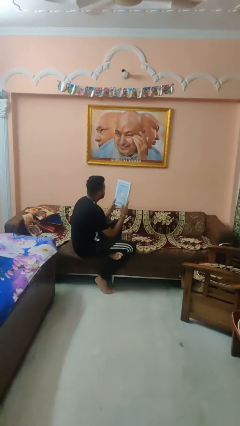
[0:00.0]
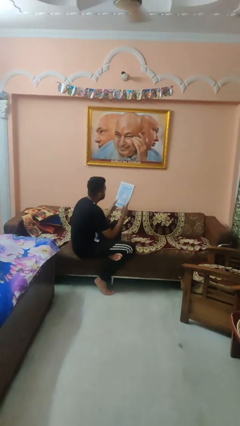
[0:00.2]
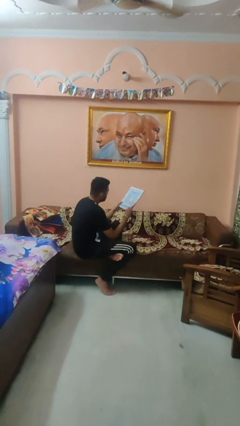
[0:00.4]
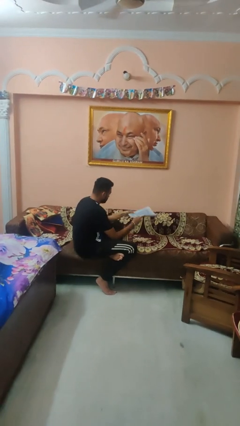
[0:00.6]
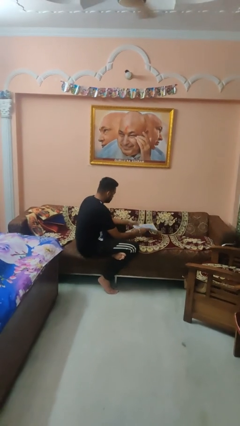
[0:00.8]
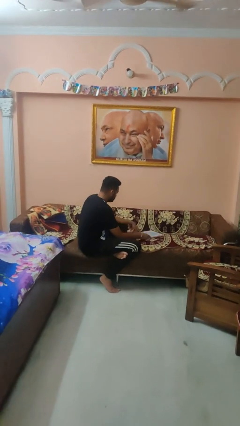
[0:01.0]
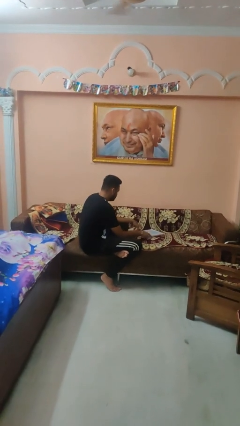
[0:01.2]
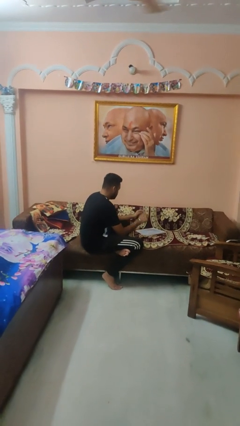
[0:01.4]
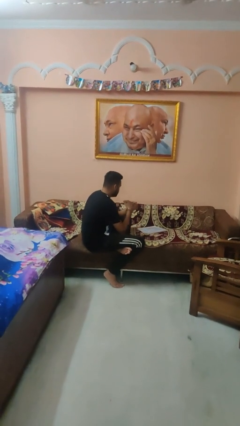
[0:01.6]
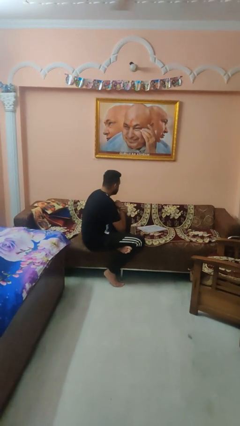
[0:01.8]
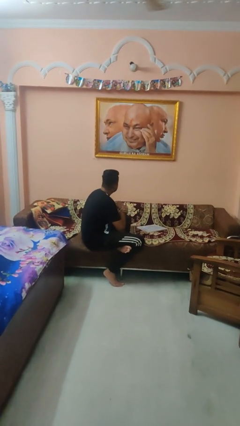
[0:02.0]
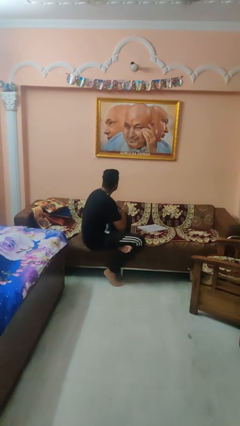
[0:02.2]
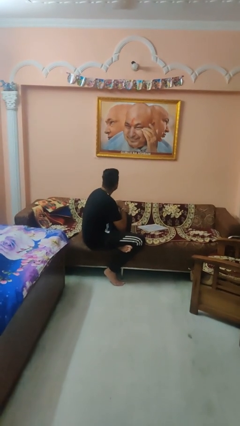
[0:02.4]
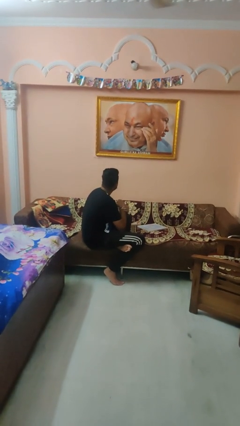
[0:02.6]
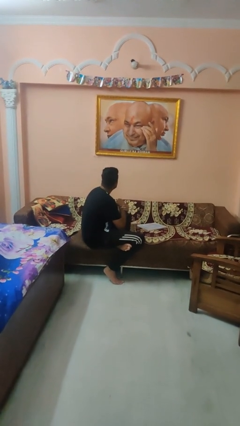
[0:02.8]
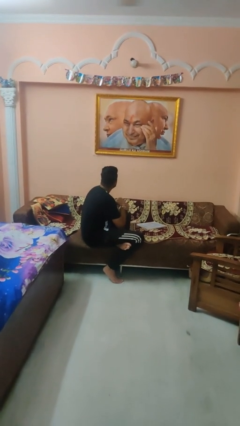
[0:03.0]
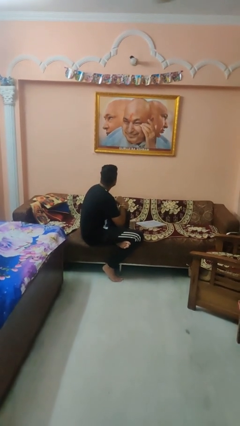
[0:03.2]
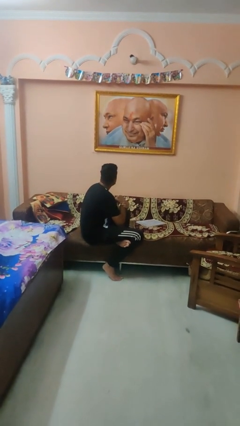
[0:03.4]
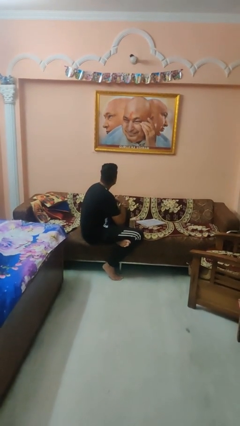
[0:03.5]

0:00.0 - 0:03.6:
person puts down object on couch

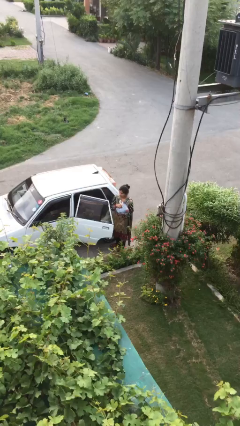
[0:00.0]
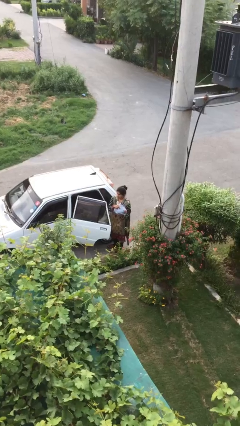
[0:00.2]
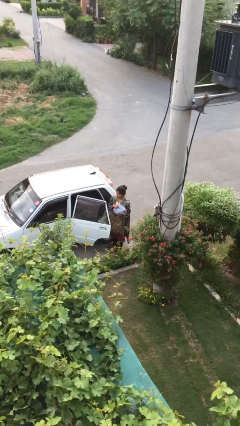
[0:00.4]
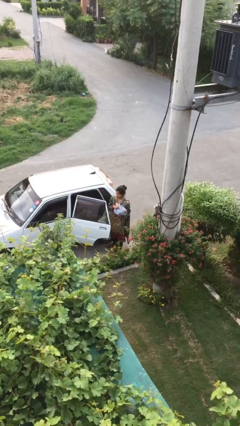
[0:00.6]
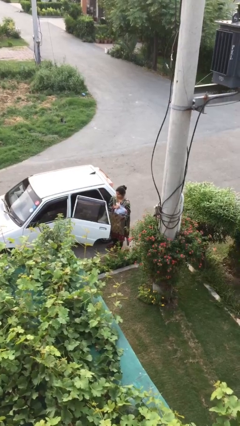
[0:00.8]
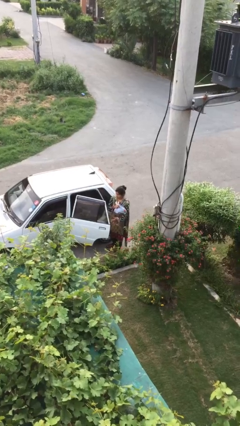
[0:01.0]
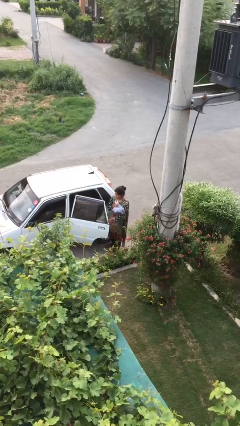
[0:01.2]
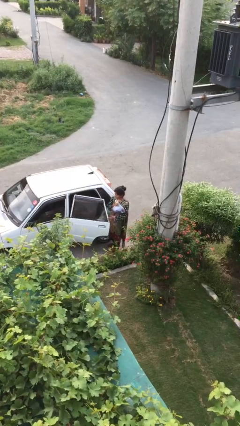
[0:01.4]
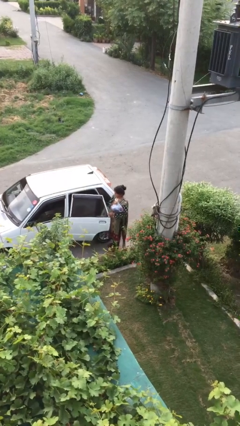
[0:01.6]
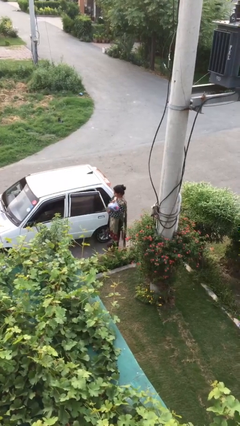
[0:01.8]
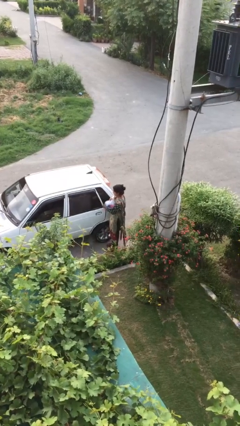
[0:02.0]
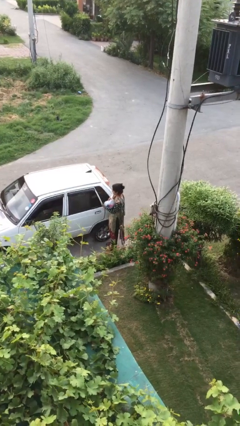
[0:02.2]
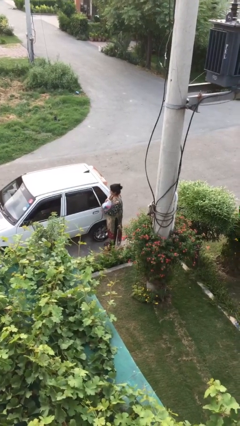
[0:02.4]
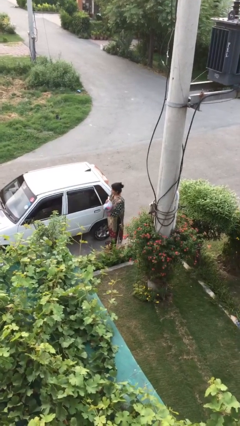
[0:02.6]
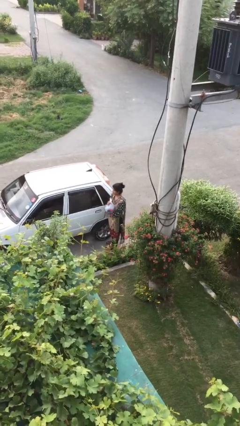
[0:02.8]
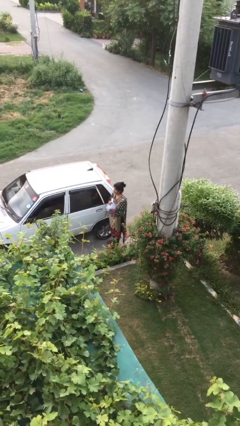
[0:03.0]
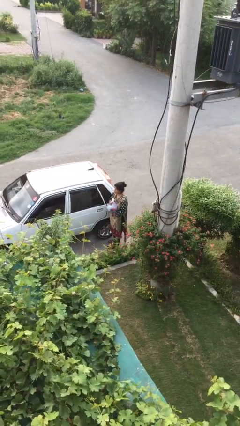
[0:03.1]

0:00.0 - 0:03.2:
person closes car door

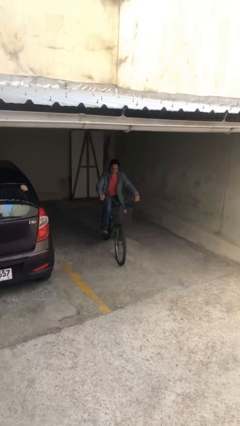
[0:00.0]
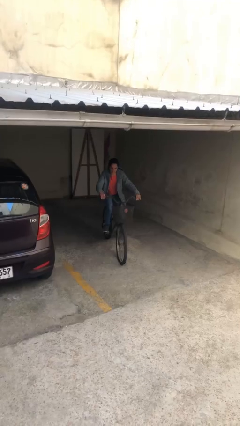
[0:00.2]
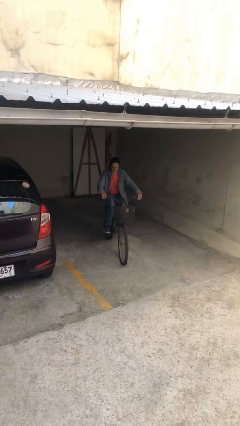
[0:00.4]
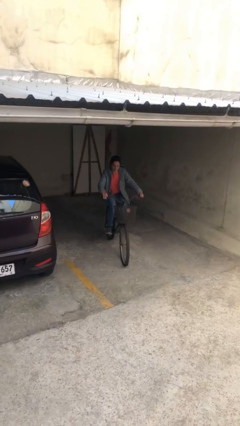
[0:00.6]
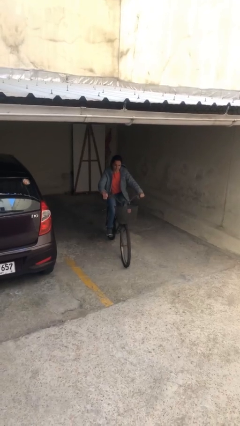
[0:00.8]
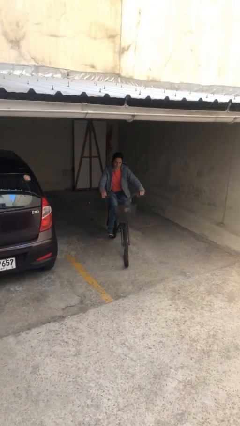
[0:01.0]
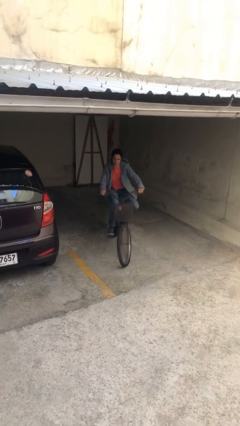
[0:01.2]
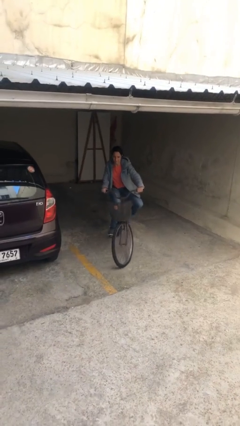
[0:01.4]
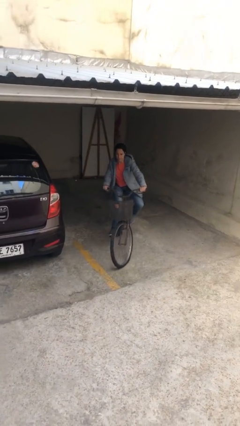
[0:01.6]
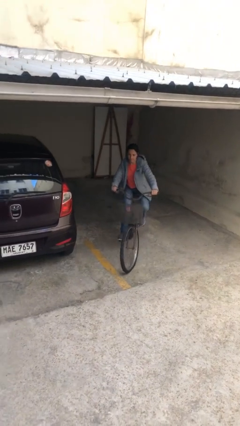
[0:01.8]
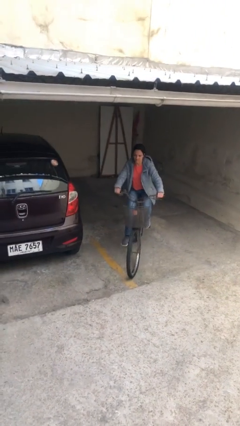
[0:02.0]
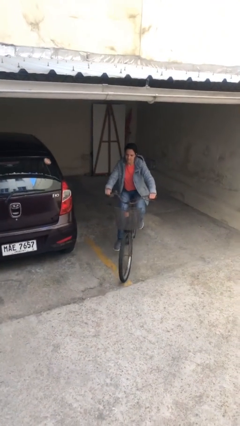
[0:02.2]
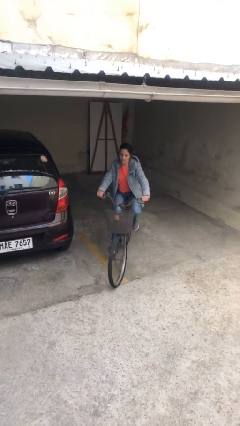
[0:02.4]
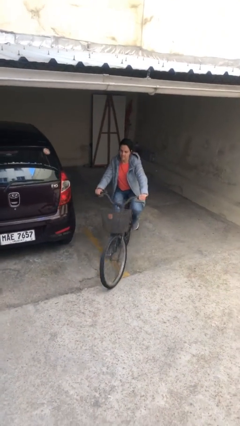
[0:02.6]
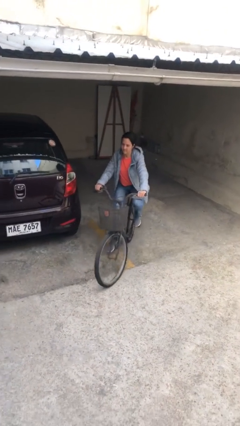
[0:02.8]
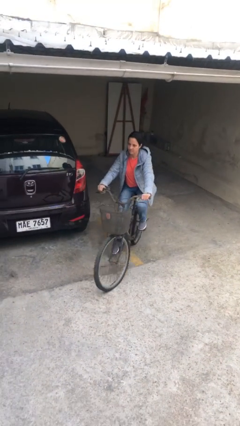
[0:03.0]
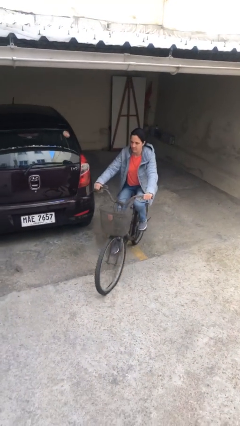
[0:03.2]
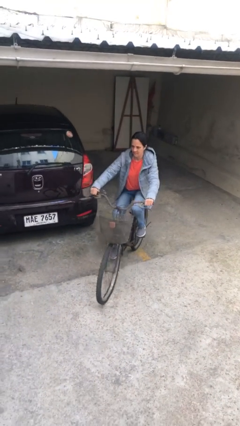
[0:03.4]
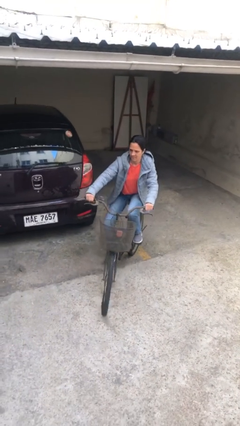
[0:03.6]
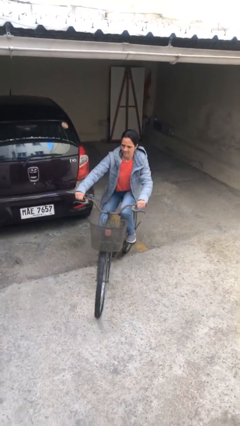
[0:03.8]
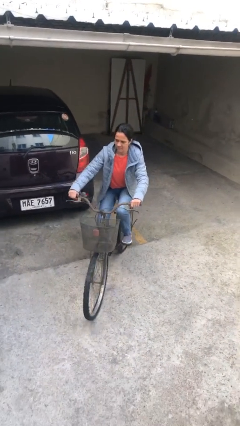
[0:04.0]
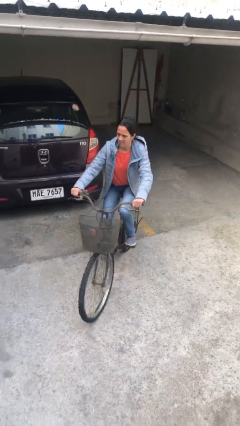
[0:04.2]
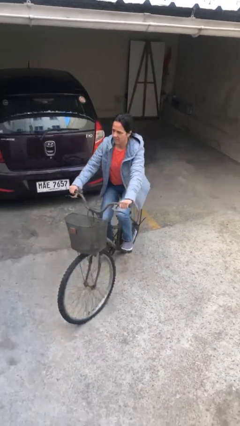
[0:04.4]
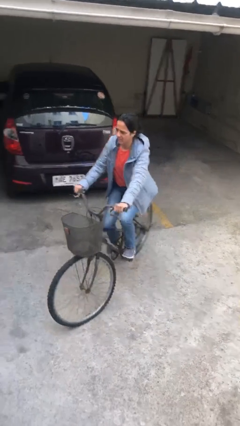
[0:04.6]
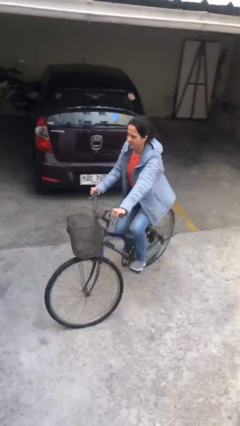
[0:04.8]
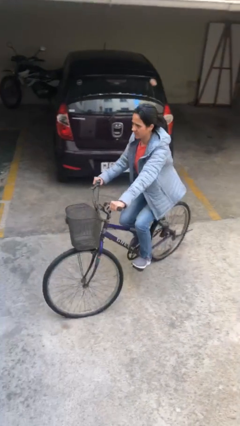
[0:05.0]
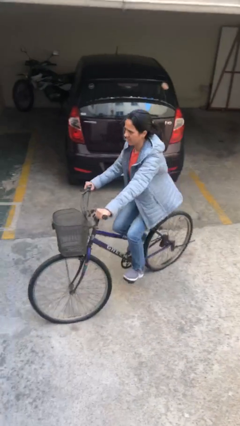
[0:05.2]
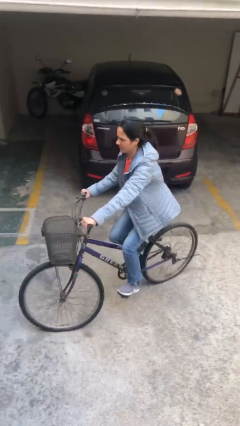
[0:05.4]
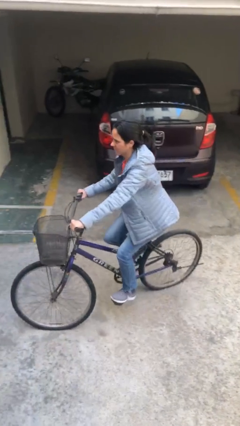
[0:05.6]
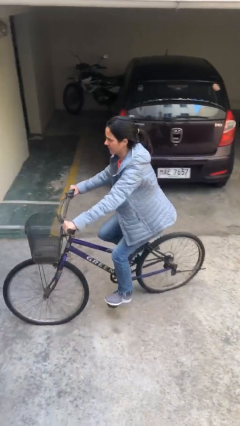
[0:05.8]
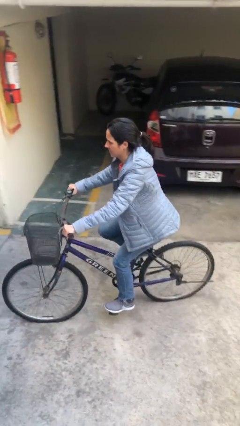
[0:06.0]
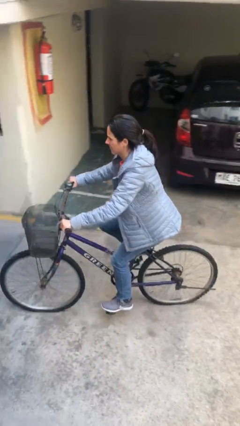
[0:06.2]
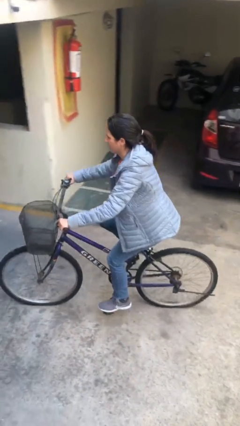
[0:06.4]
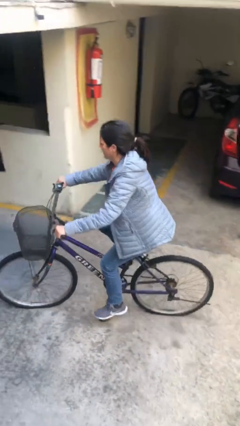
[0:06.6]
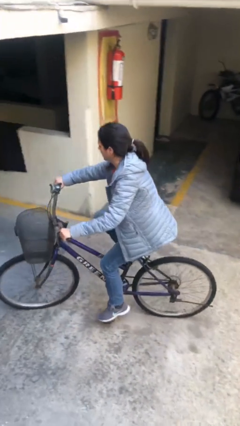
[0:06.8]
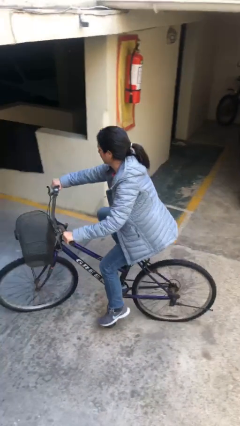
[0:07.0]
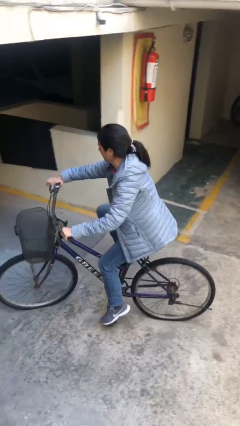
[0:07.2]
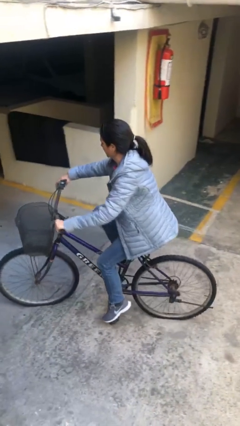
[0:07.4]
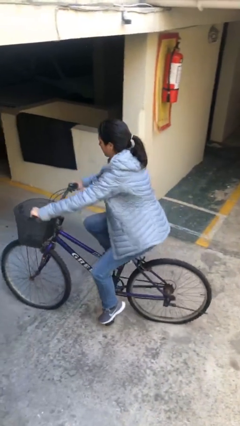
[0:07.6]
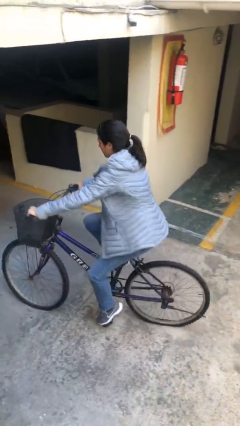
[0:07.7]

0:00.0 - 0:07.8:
person rides bicycle

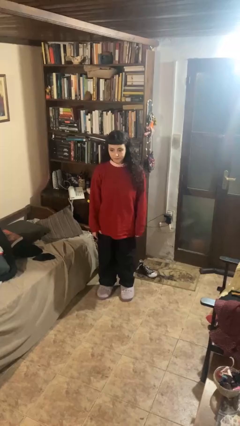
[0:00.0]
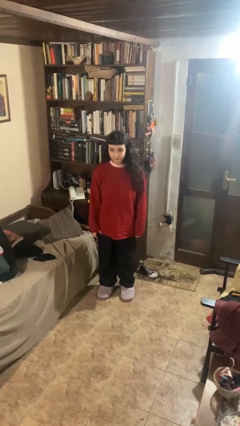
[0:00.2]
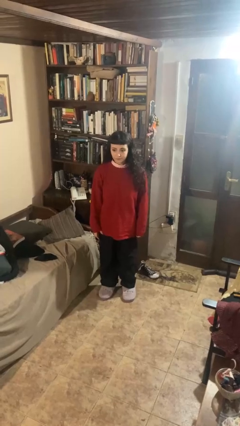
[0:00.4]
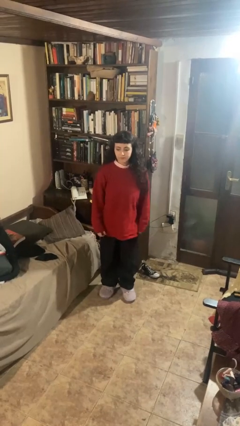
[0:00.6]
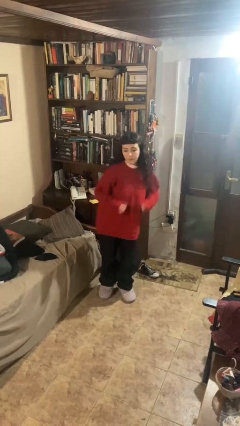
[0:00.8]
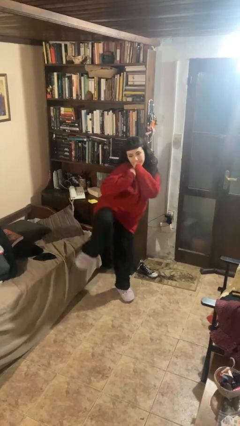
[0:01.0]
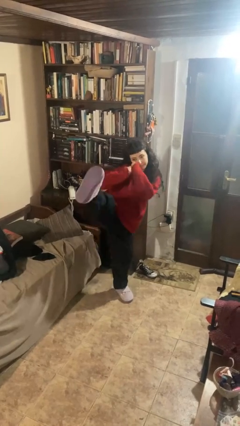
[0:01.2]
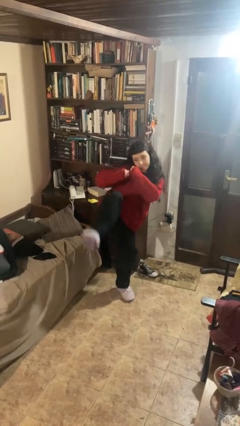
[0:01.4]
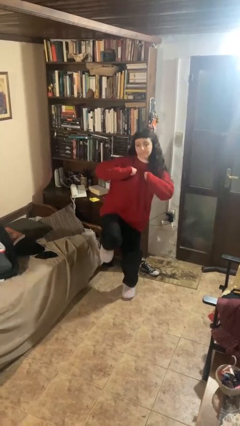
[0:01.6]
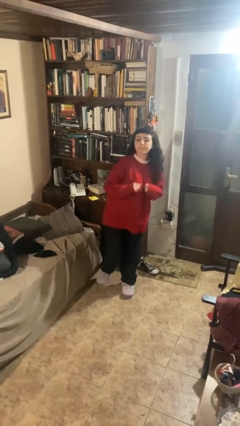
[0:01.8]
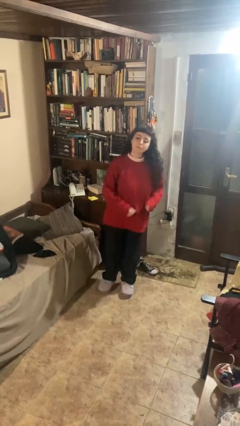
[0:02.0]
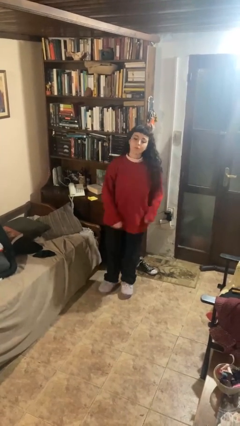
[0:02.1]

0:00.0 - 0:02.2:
person karate kicks

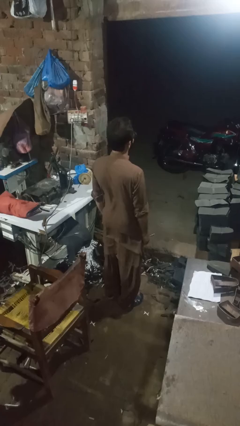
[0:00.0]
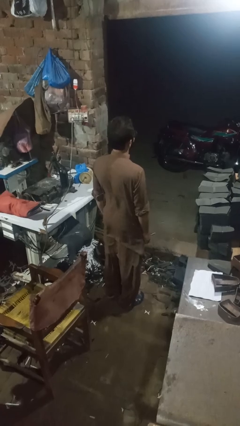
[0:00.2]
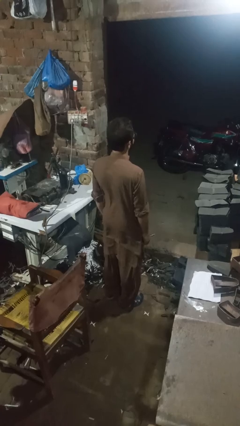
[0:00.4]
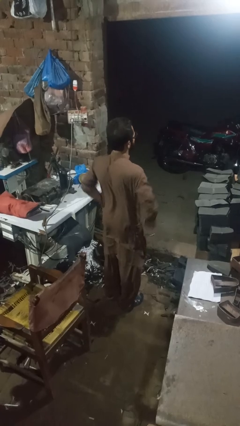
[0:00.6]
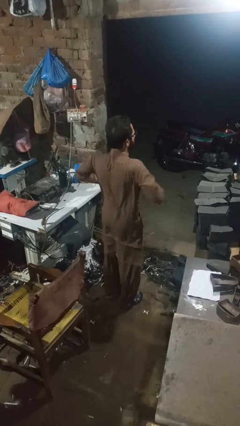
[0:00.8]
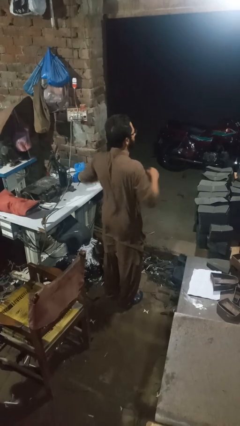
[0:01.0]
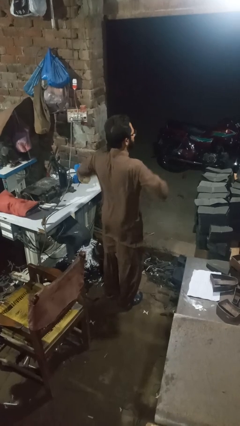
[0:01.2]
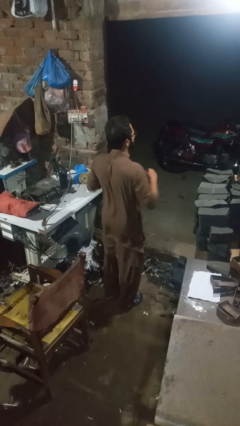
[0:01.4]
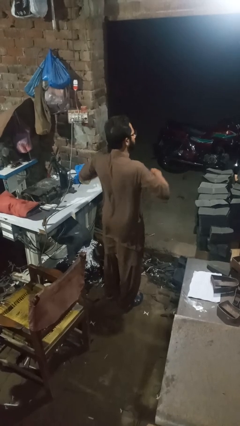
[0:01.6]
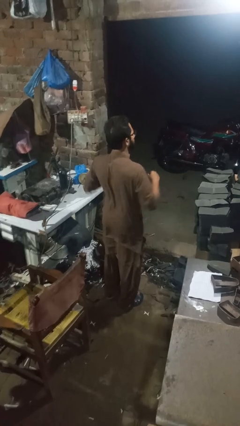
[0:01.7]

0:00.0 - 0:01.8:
person dances in place
